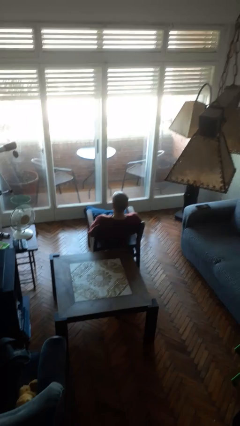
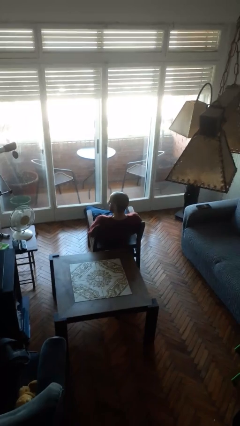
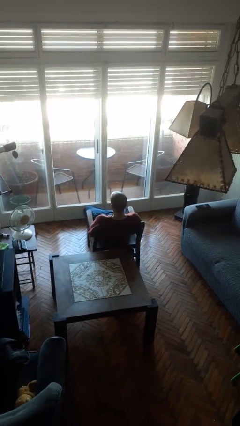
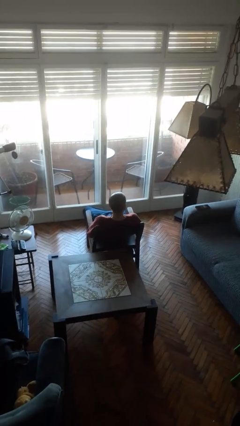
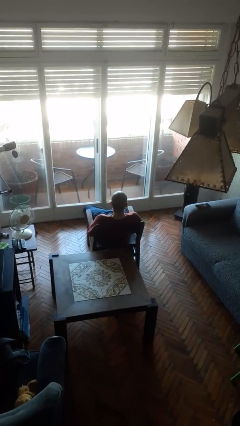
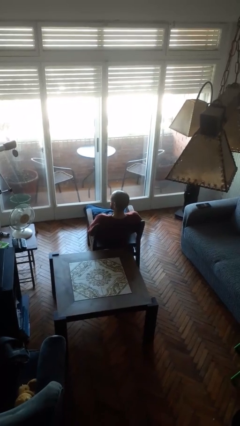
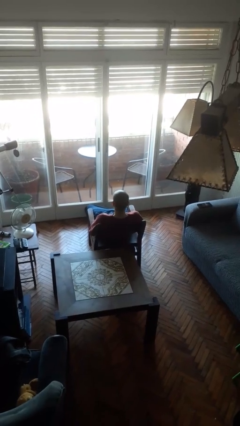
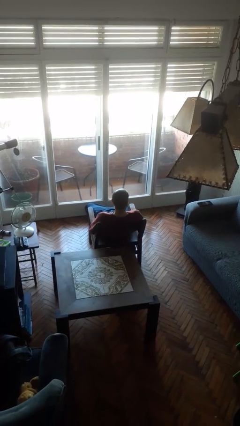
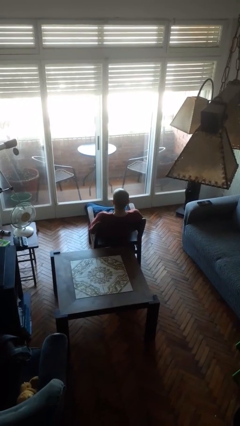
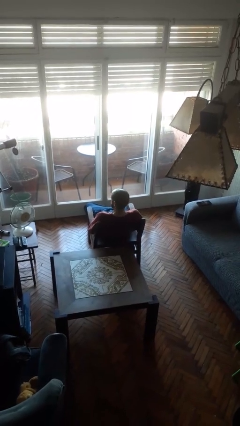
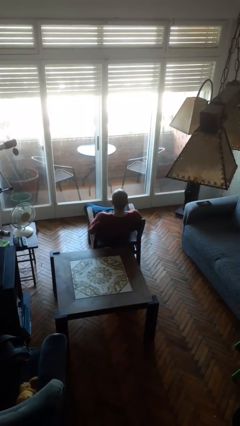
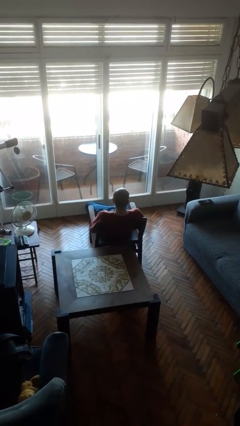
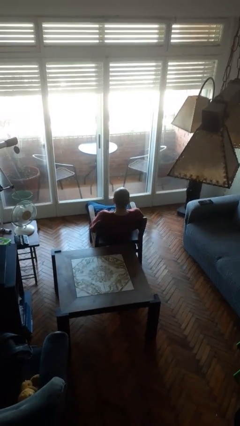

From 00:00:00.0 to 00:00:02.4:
person shakes head

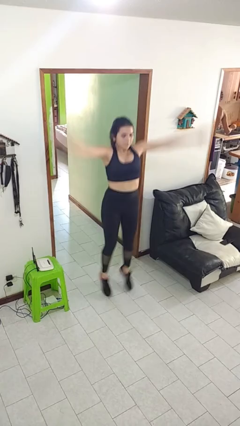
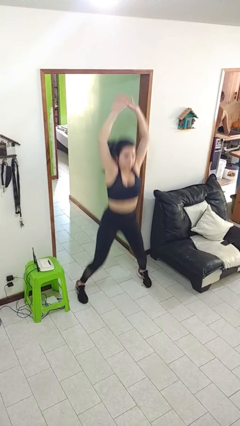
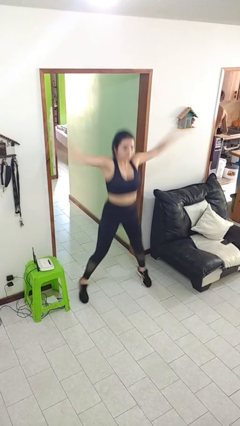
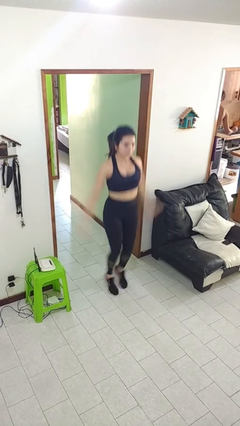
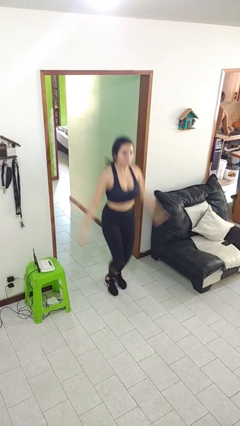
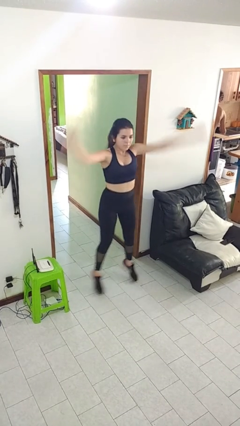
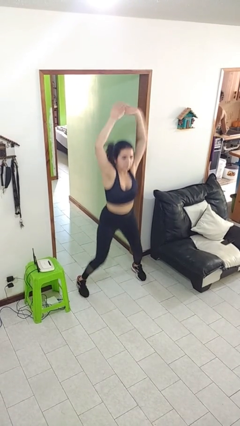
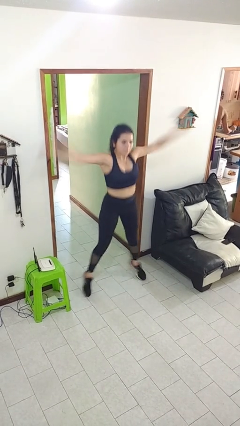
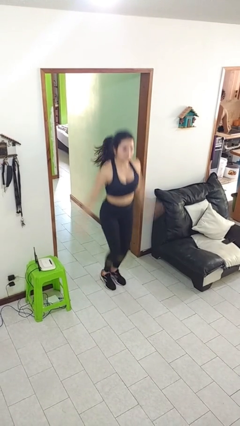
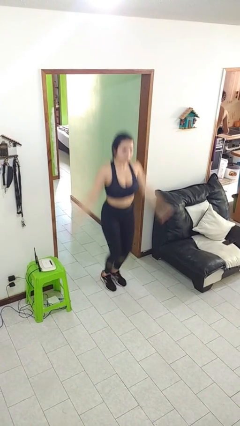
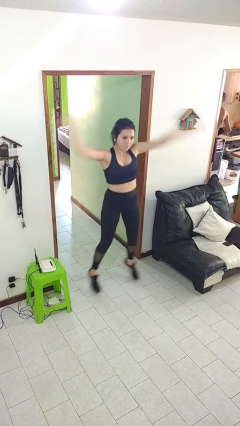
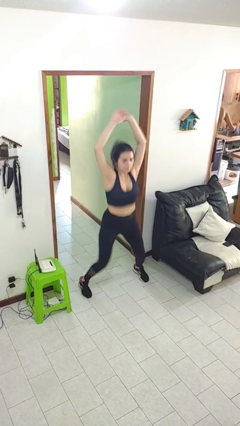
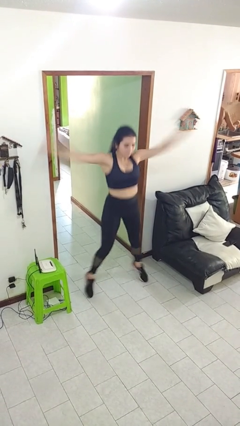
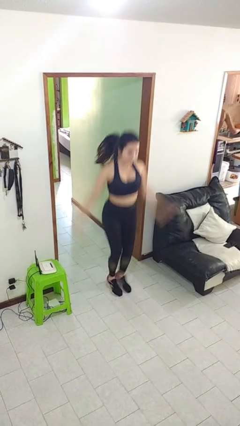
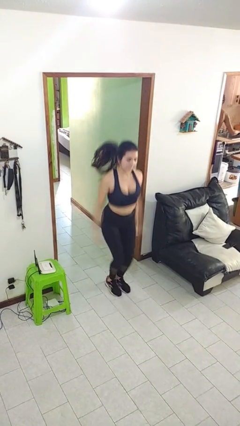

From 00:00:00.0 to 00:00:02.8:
person exercises with jumping jacks

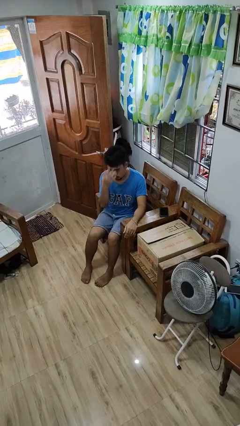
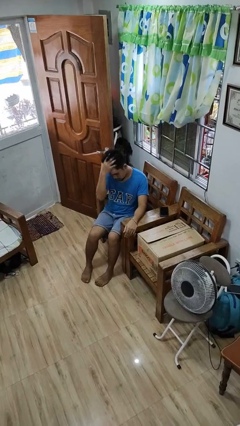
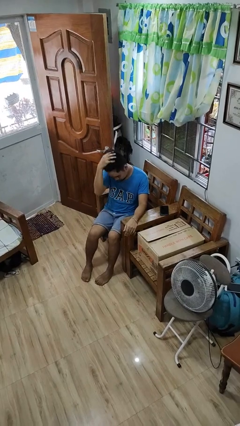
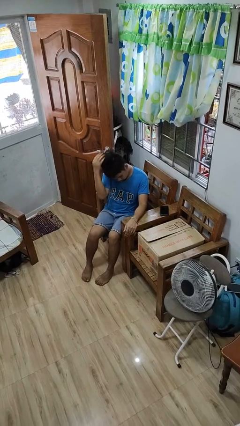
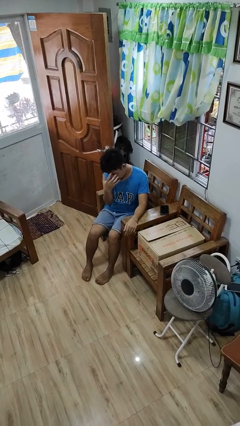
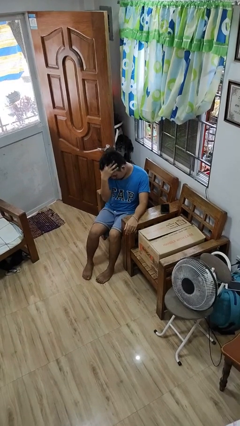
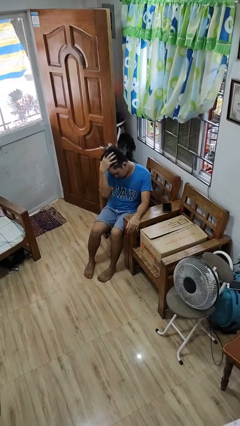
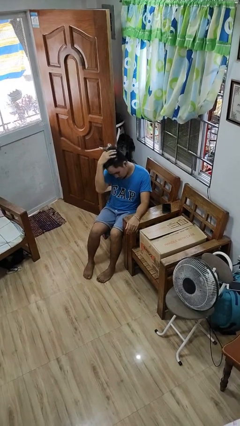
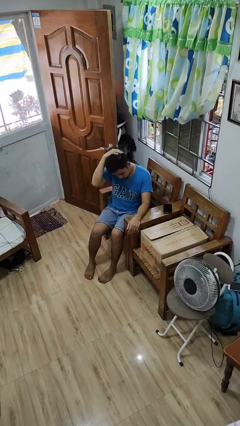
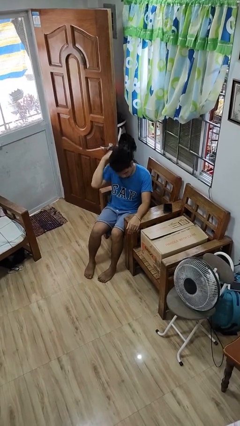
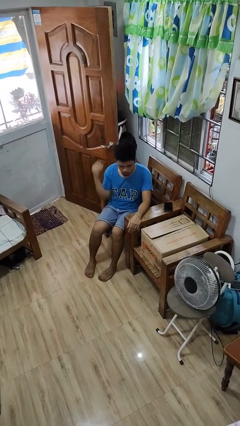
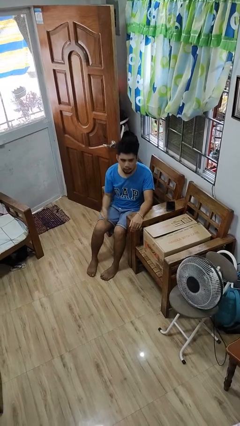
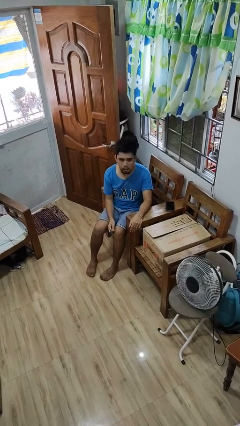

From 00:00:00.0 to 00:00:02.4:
person strokes hair

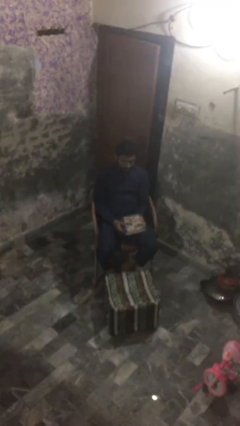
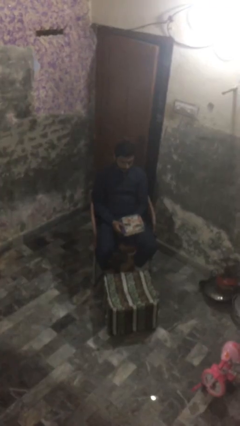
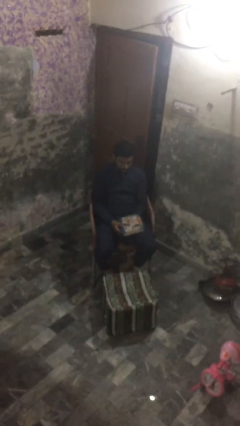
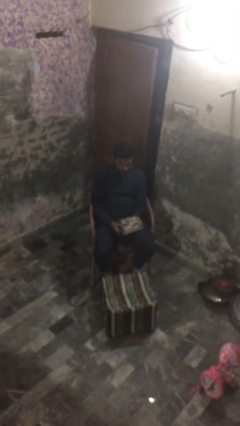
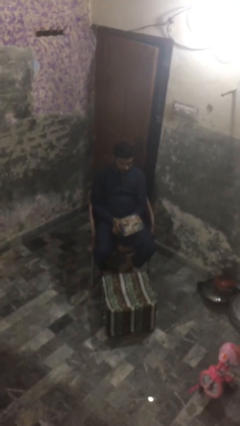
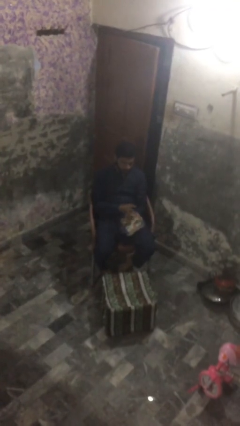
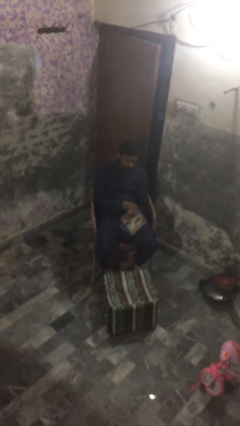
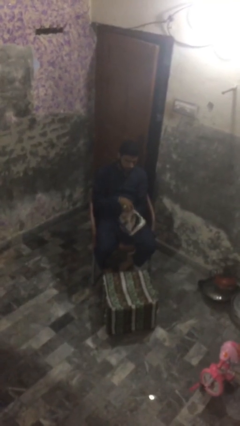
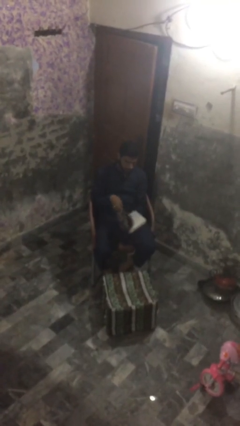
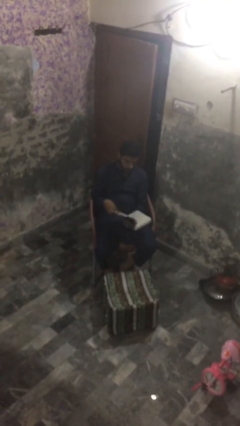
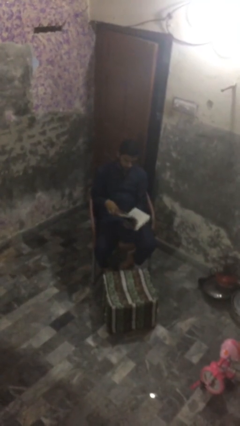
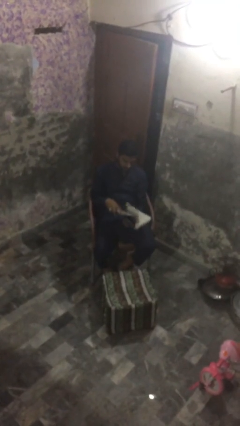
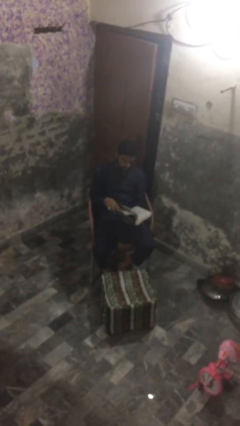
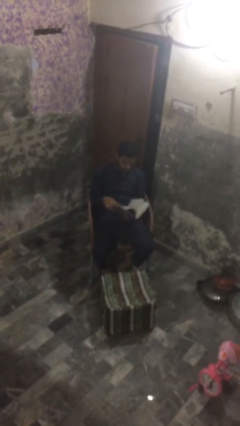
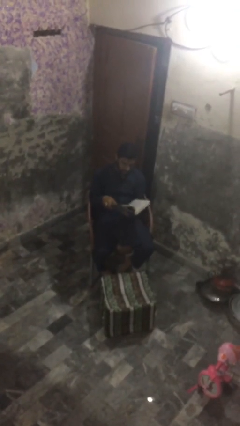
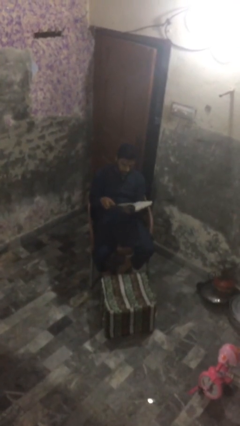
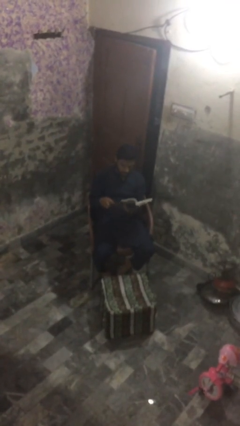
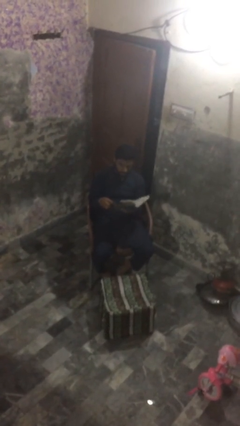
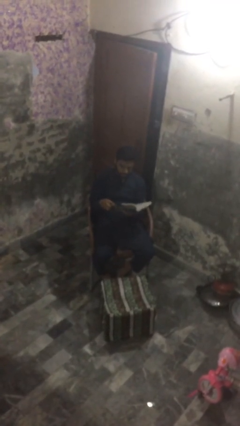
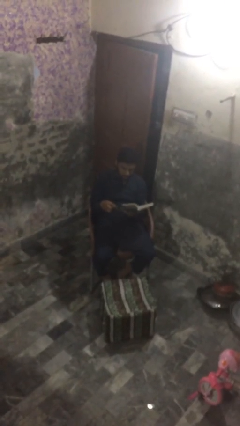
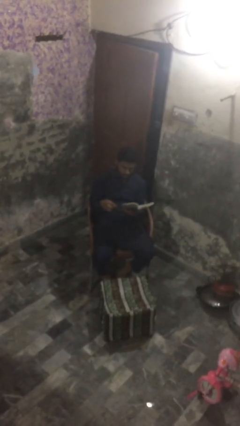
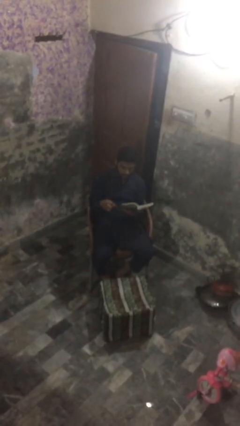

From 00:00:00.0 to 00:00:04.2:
person reads document

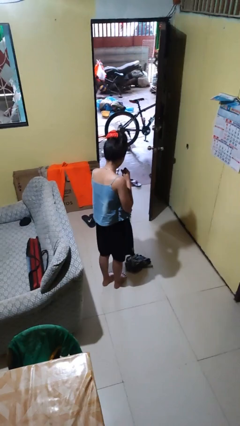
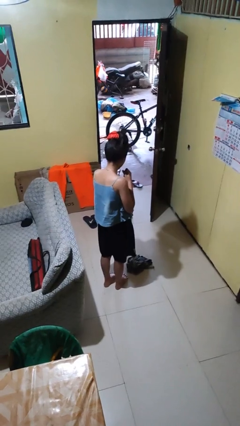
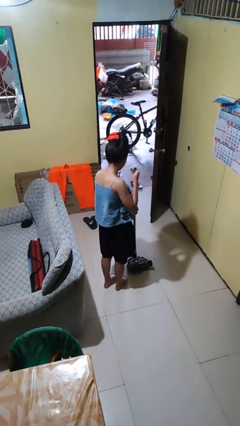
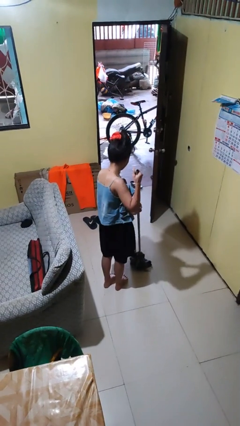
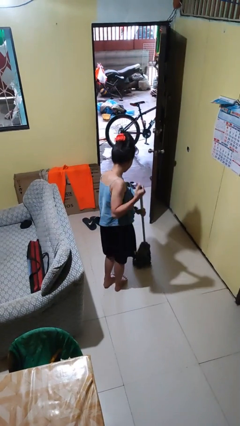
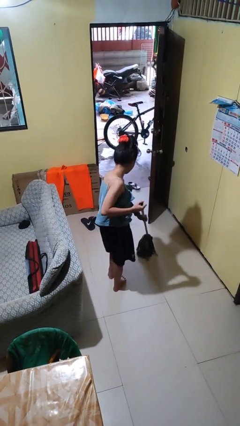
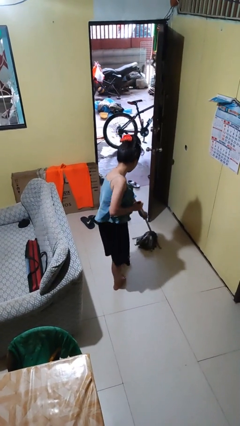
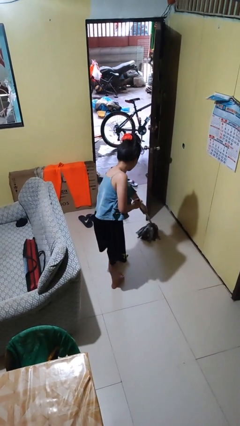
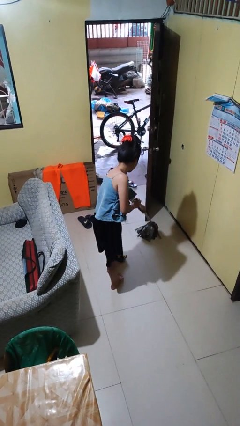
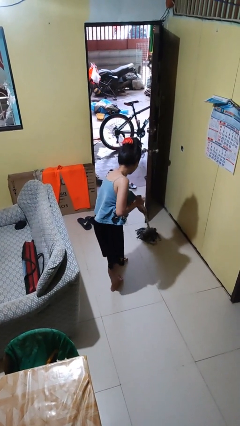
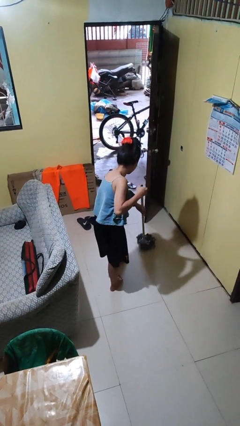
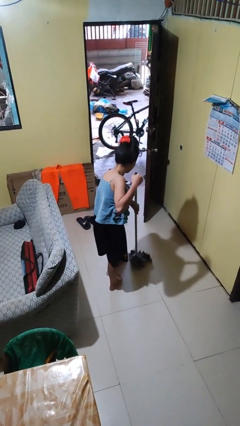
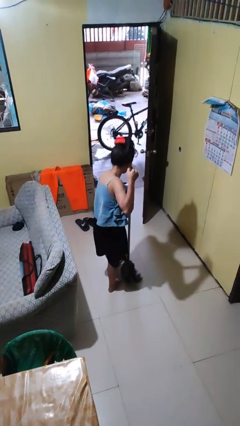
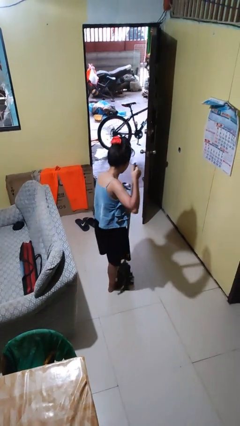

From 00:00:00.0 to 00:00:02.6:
person mops

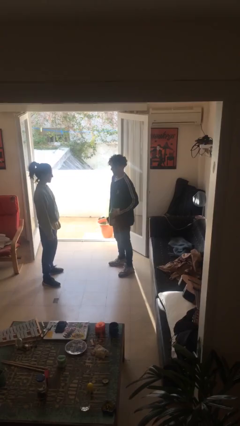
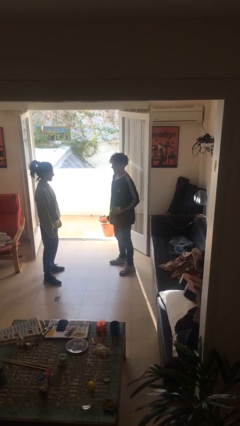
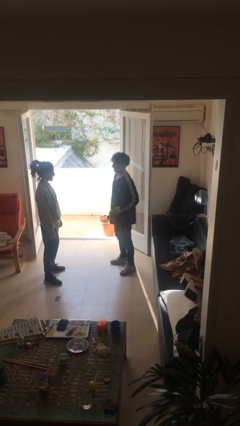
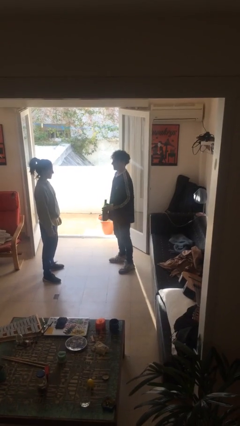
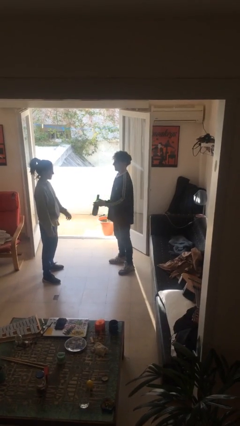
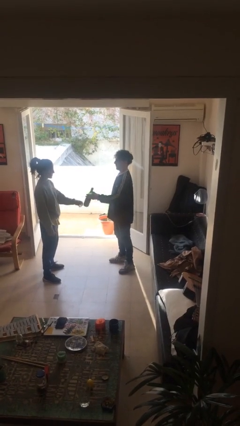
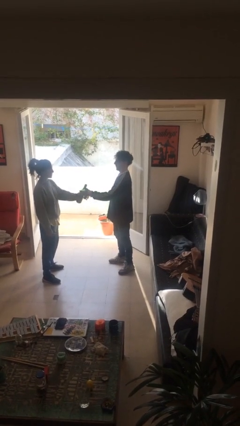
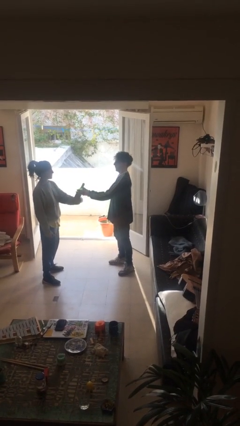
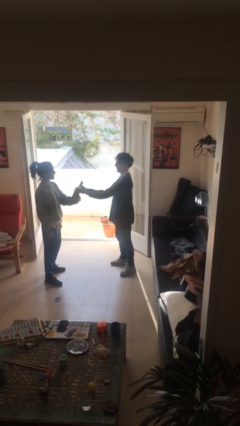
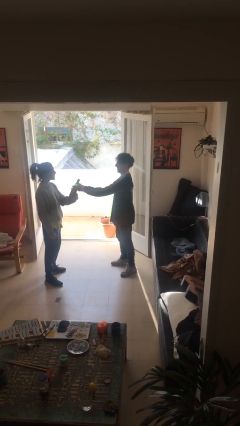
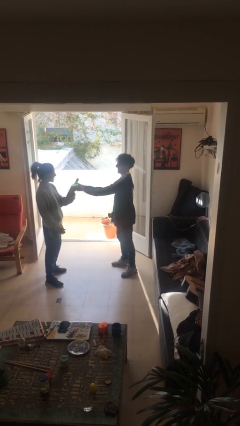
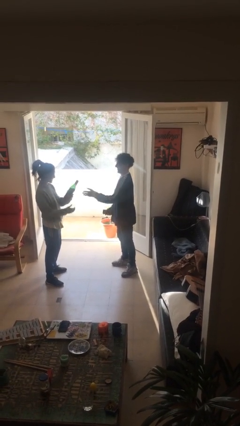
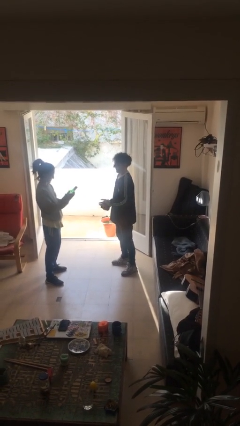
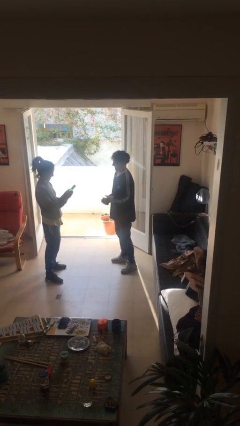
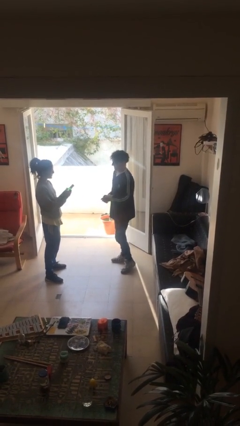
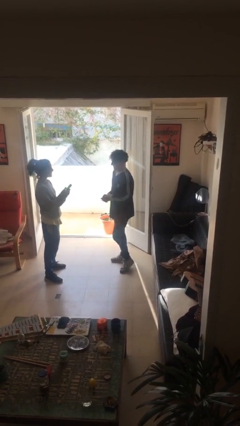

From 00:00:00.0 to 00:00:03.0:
person transfers object to person

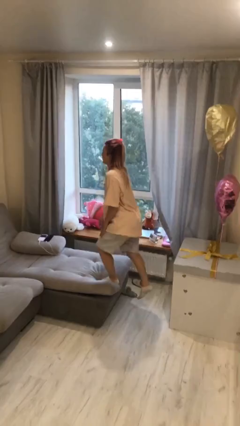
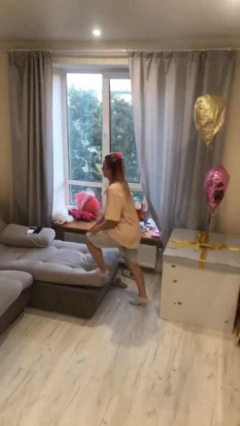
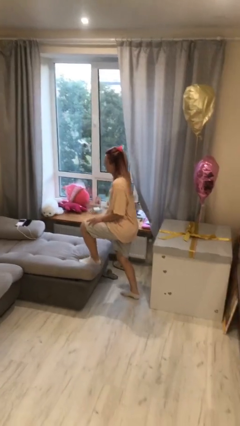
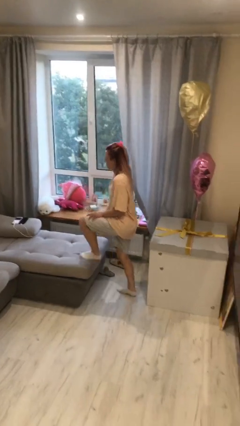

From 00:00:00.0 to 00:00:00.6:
person climbs off couch
